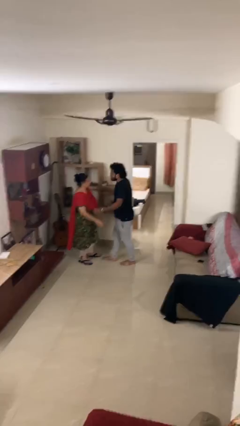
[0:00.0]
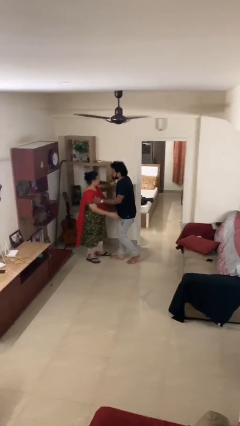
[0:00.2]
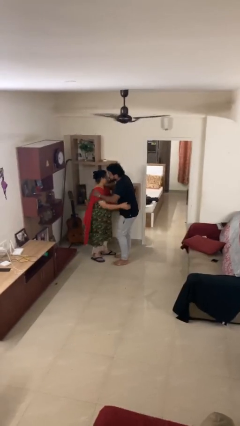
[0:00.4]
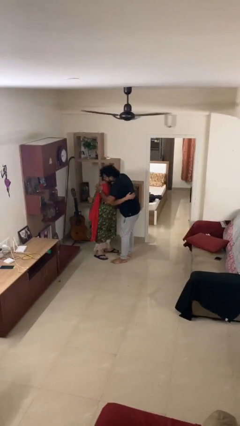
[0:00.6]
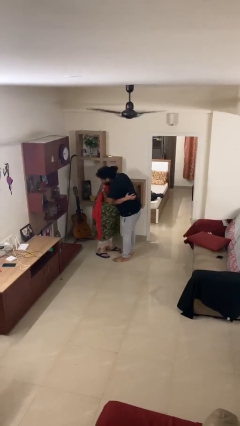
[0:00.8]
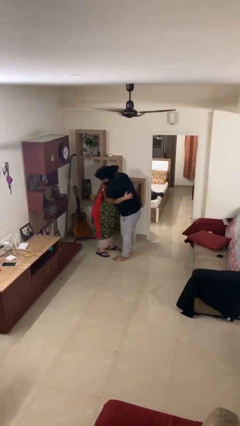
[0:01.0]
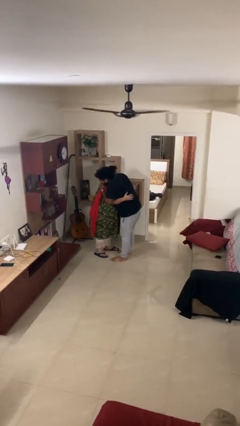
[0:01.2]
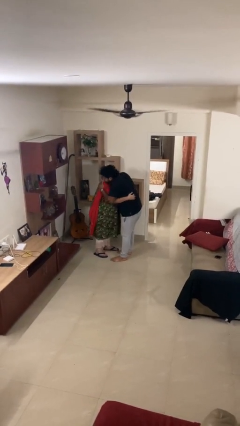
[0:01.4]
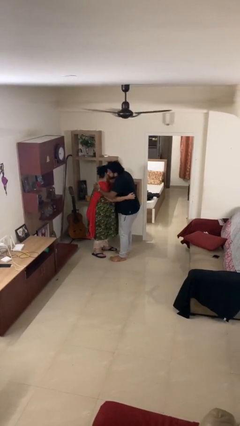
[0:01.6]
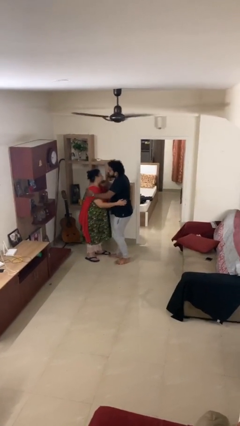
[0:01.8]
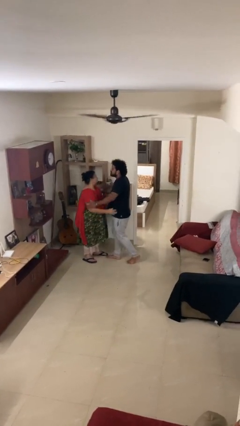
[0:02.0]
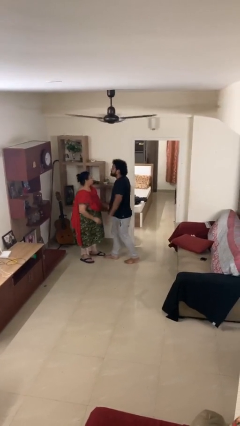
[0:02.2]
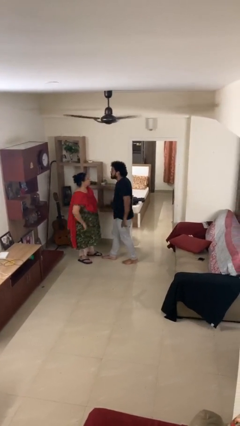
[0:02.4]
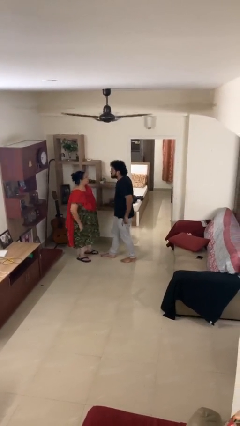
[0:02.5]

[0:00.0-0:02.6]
person embraces person

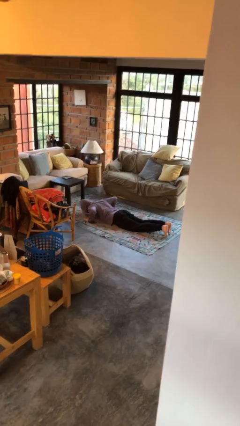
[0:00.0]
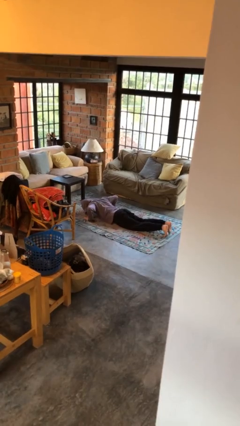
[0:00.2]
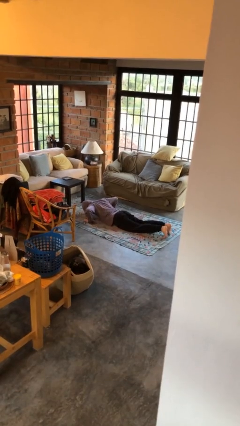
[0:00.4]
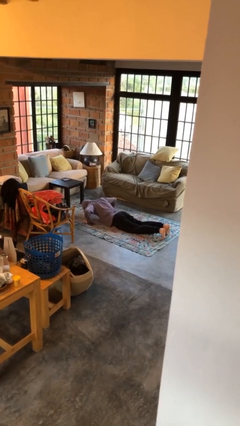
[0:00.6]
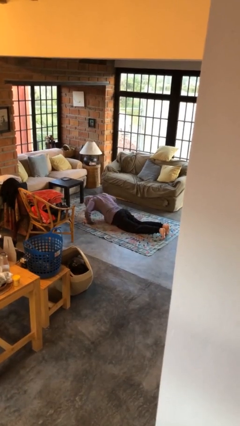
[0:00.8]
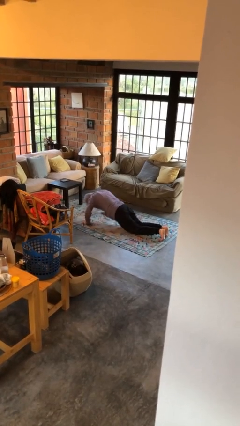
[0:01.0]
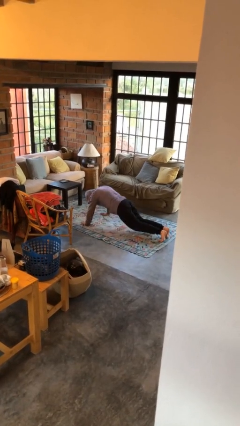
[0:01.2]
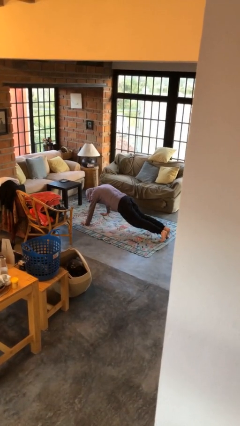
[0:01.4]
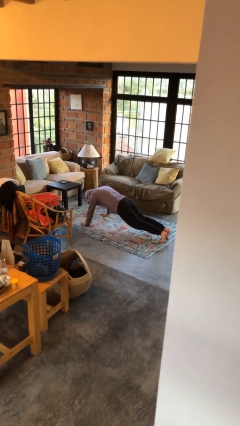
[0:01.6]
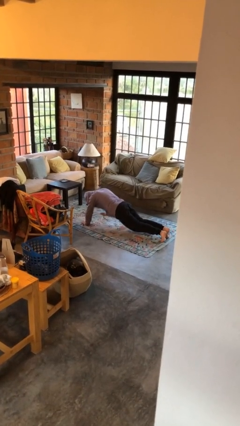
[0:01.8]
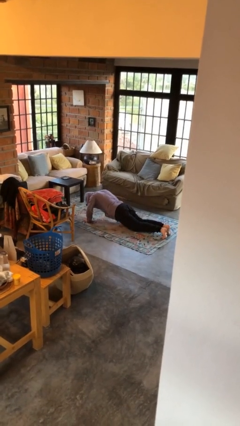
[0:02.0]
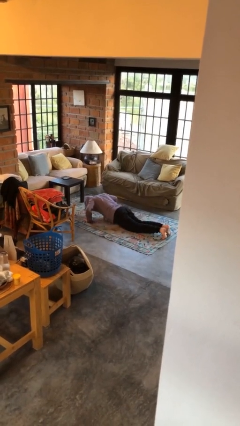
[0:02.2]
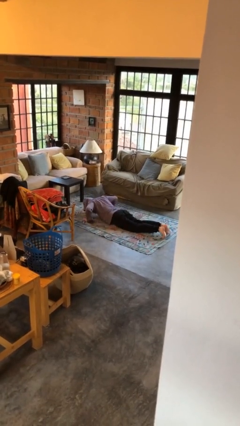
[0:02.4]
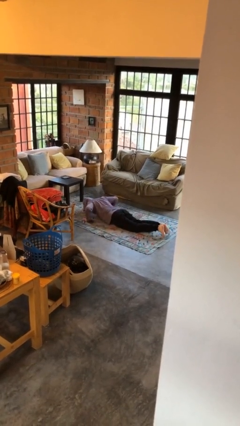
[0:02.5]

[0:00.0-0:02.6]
person exercises with pushup

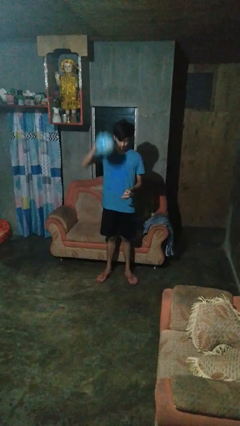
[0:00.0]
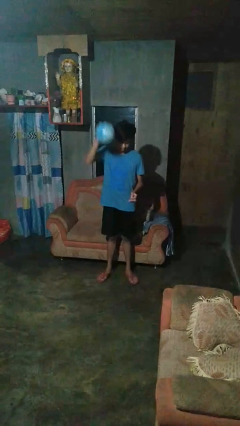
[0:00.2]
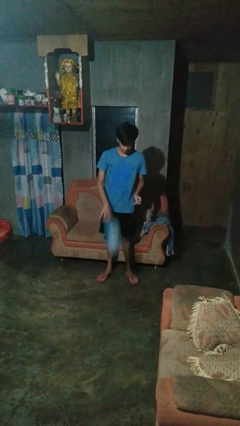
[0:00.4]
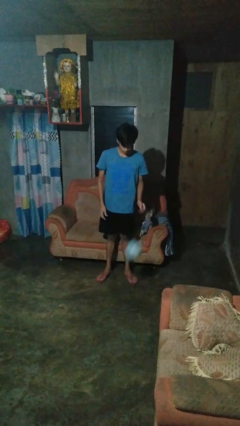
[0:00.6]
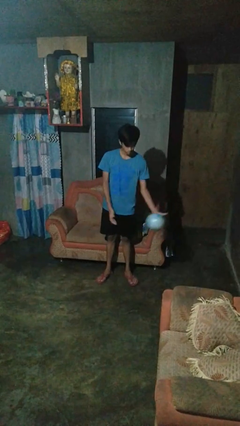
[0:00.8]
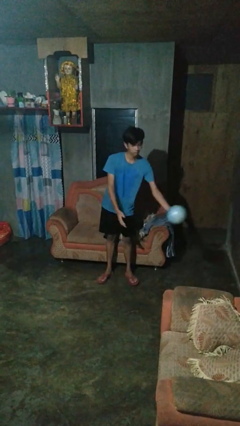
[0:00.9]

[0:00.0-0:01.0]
person bounces ball on floor

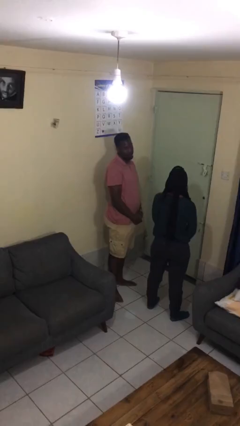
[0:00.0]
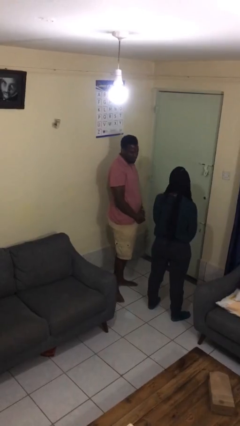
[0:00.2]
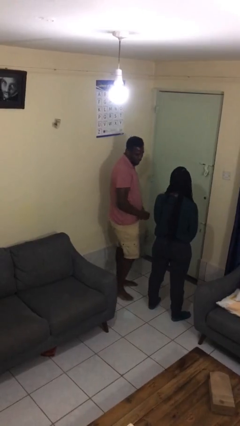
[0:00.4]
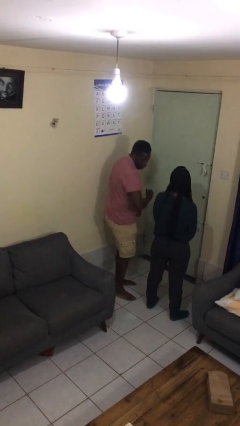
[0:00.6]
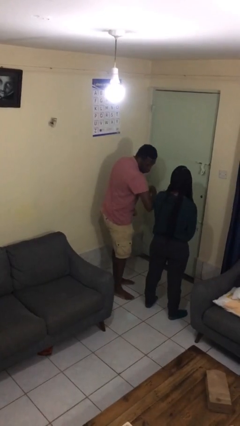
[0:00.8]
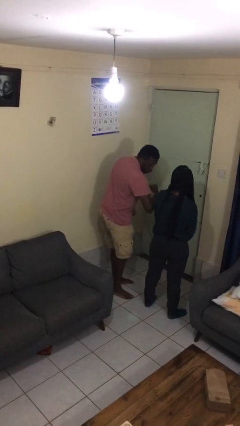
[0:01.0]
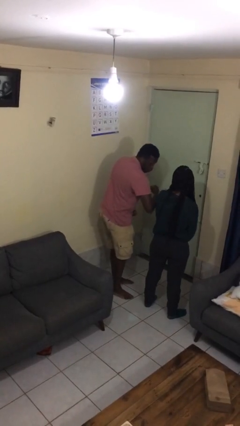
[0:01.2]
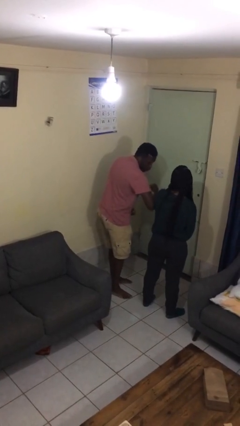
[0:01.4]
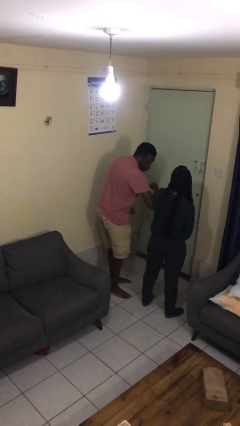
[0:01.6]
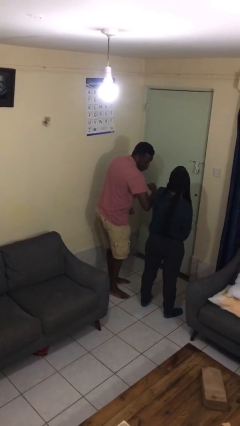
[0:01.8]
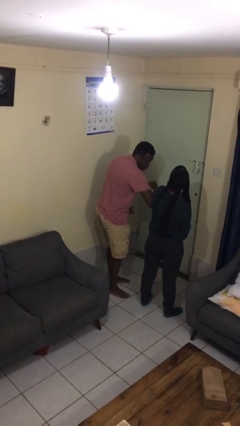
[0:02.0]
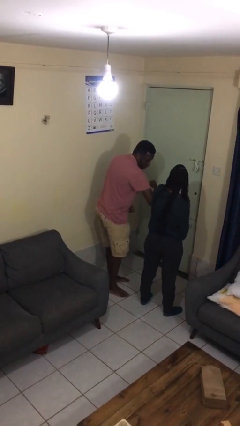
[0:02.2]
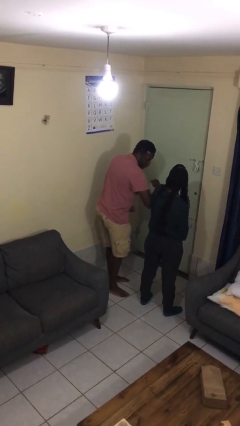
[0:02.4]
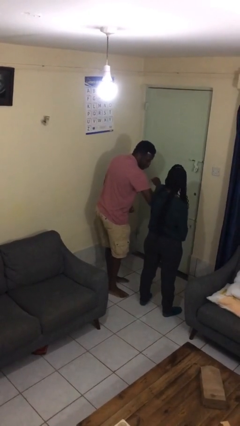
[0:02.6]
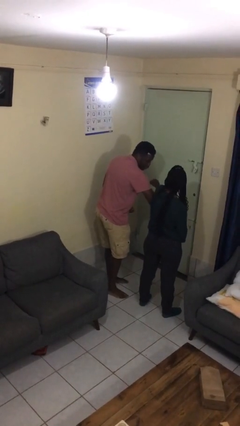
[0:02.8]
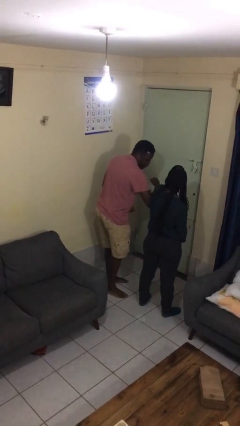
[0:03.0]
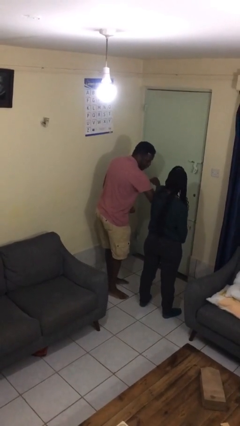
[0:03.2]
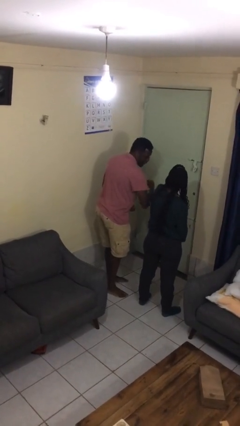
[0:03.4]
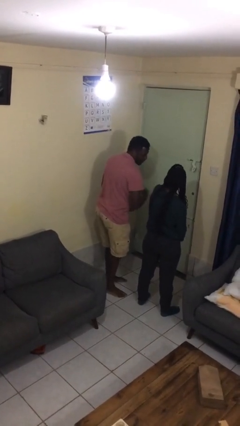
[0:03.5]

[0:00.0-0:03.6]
person nudges person with elbow

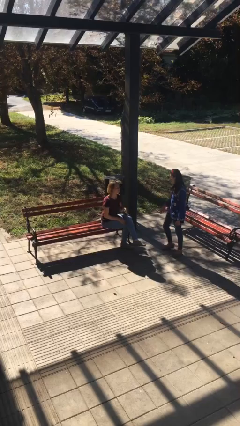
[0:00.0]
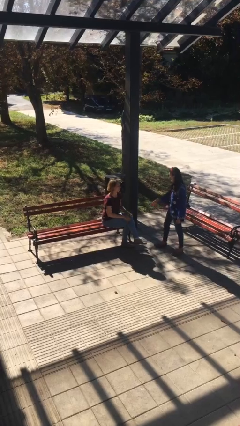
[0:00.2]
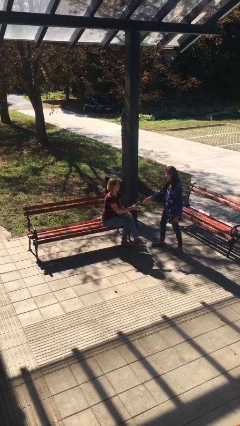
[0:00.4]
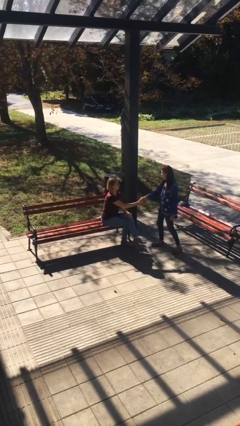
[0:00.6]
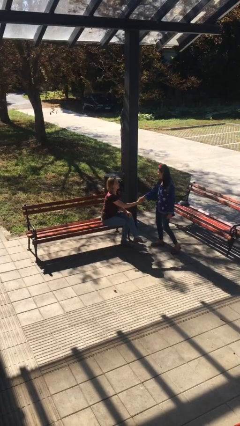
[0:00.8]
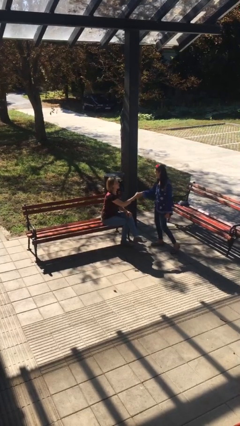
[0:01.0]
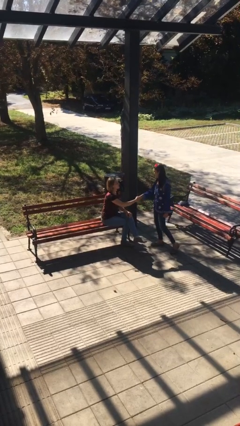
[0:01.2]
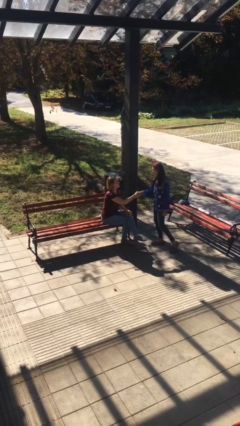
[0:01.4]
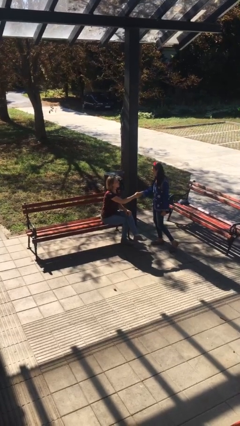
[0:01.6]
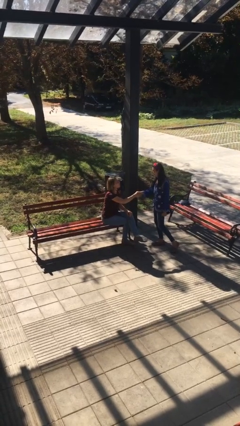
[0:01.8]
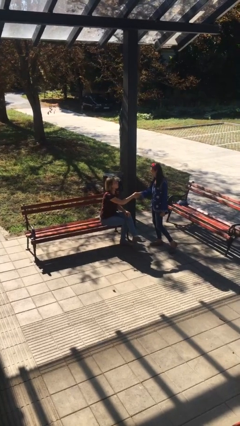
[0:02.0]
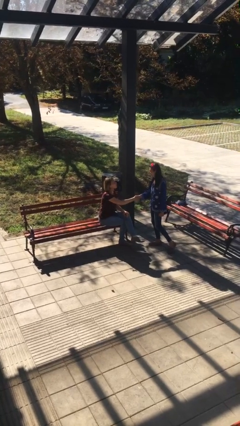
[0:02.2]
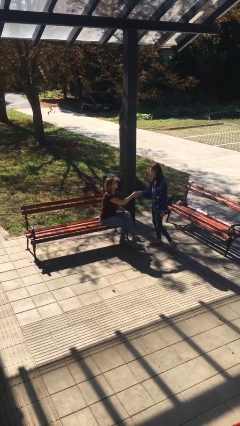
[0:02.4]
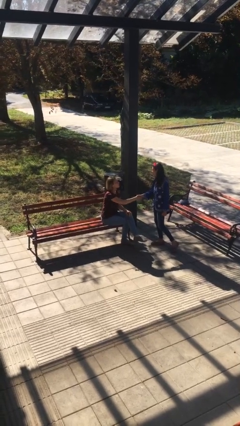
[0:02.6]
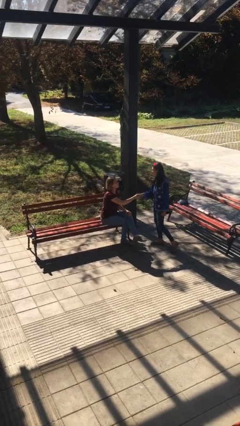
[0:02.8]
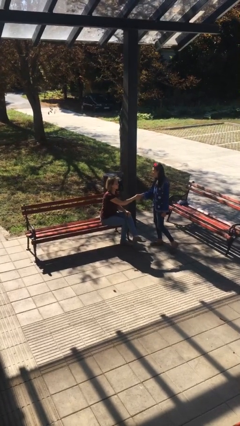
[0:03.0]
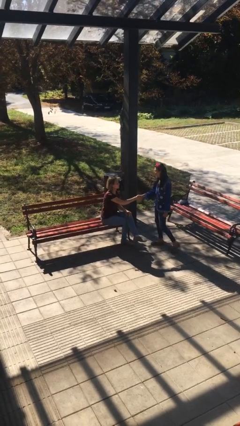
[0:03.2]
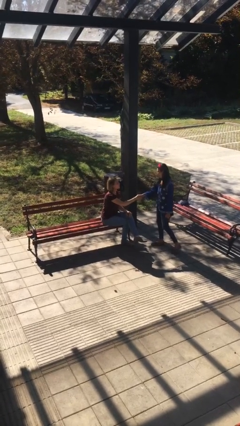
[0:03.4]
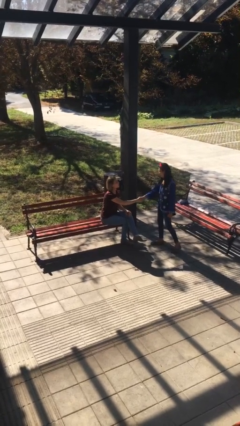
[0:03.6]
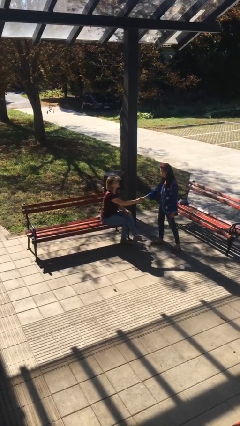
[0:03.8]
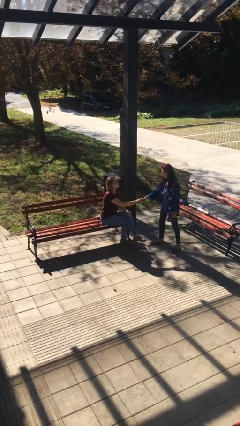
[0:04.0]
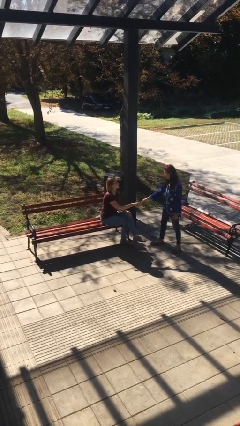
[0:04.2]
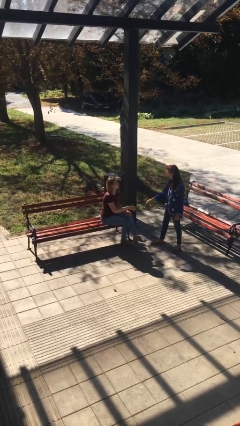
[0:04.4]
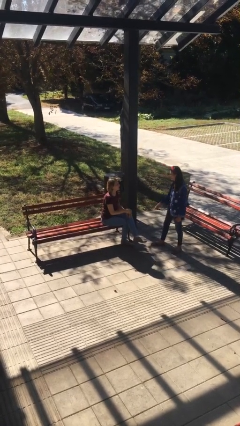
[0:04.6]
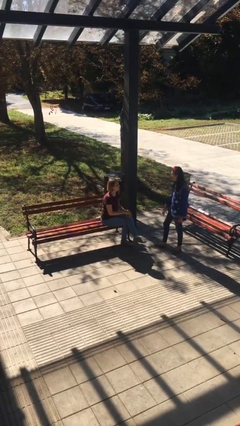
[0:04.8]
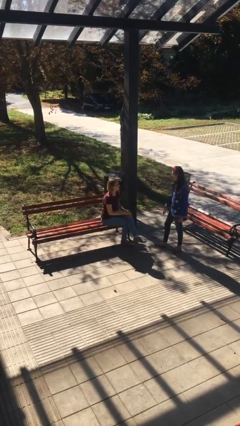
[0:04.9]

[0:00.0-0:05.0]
person shakes hand

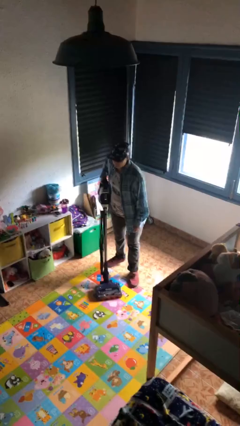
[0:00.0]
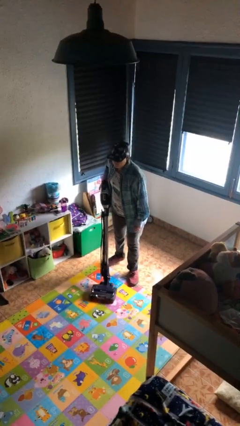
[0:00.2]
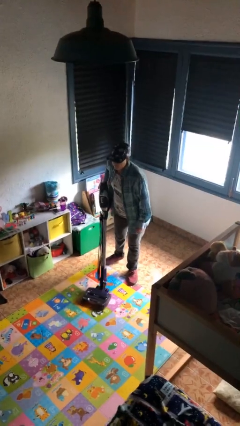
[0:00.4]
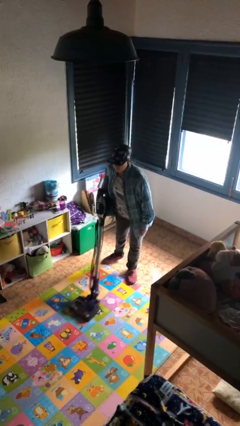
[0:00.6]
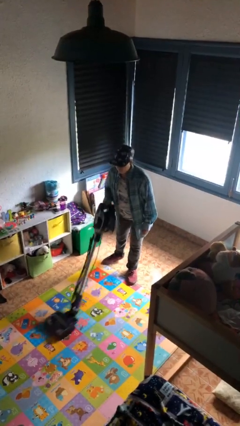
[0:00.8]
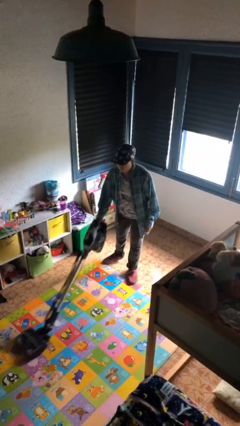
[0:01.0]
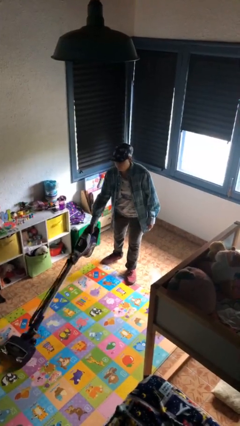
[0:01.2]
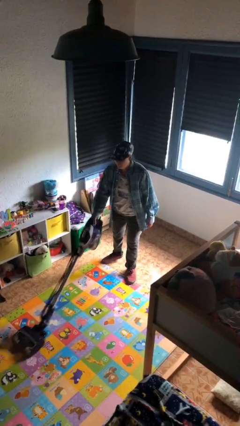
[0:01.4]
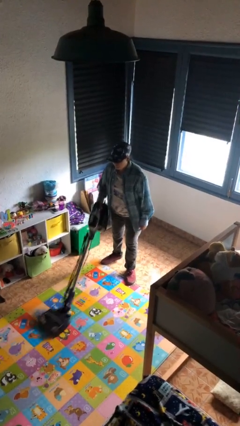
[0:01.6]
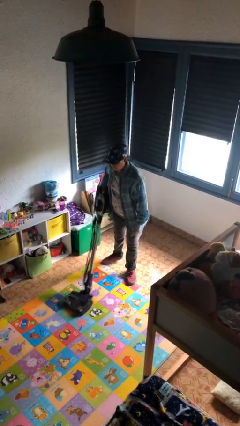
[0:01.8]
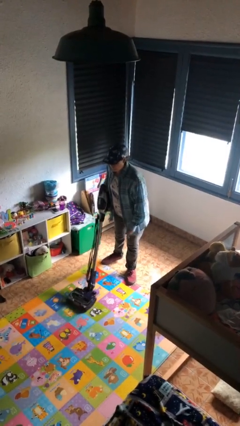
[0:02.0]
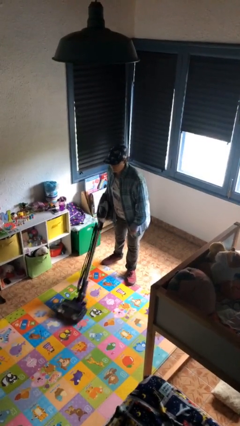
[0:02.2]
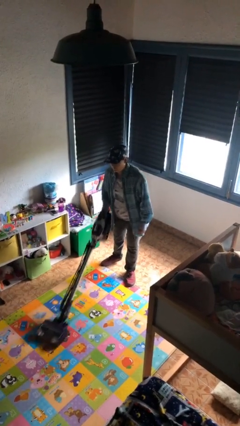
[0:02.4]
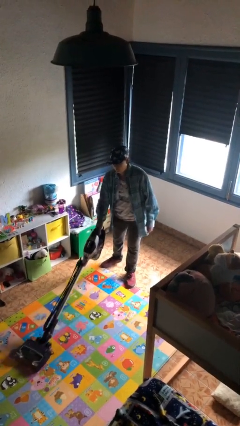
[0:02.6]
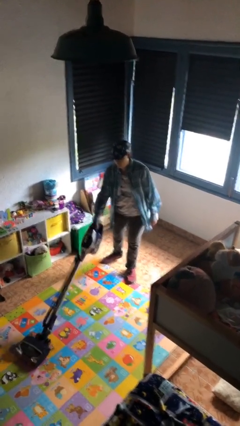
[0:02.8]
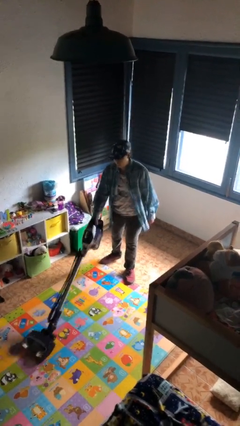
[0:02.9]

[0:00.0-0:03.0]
person vacuums carpet
